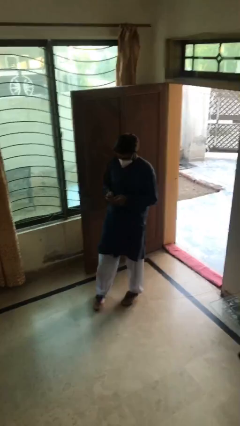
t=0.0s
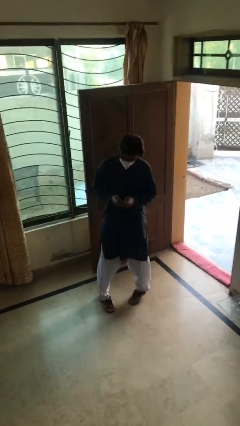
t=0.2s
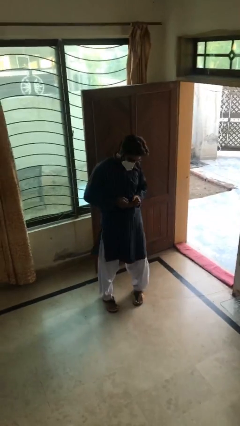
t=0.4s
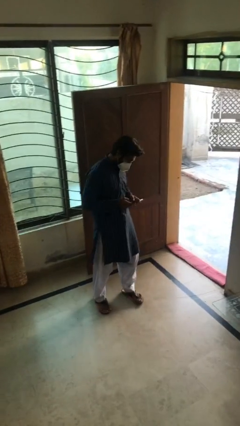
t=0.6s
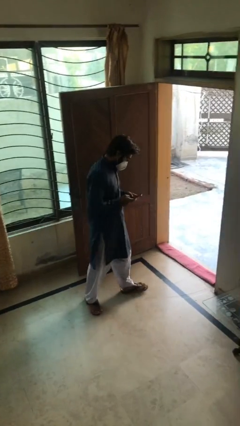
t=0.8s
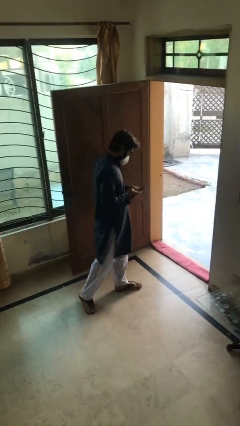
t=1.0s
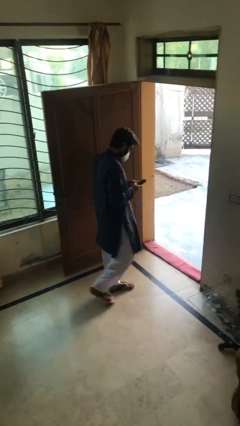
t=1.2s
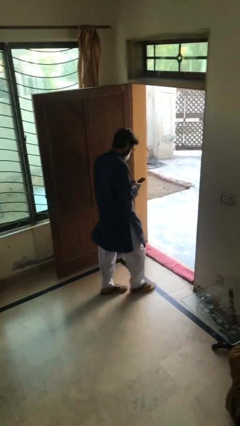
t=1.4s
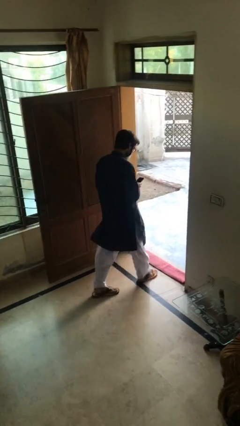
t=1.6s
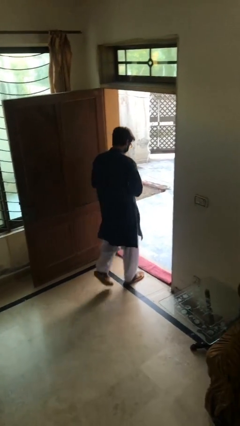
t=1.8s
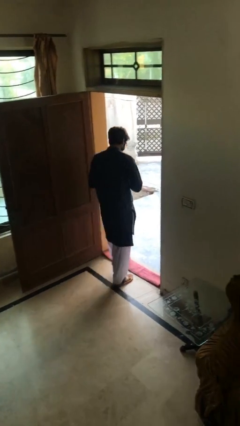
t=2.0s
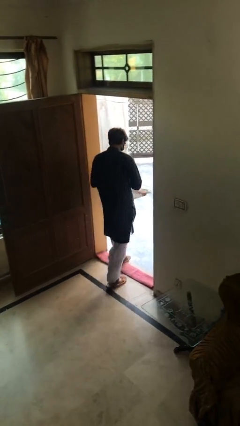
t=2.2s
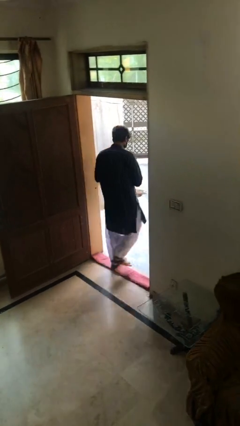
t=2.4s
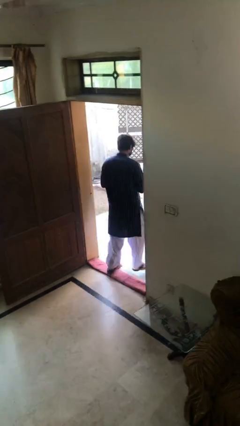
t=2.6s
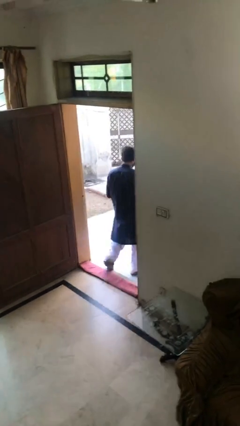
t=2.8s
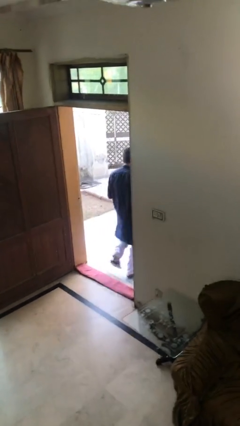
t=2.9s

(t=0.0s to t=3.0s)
person exits scene through structure

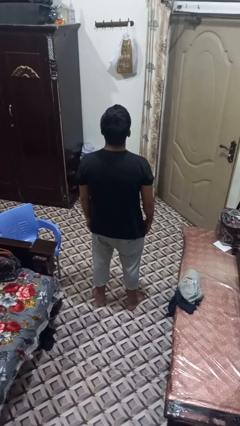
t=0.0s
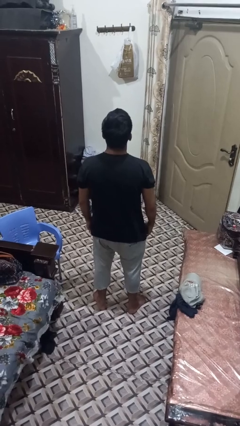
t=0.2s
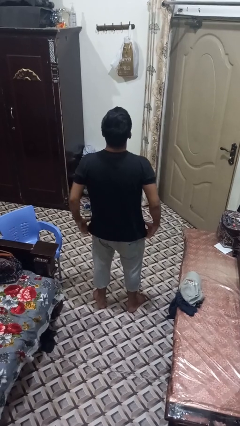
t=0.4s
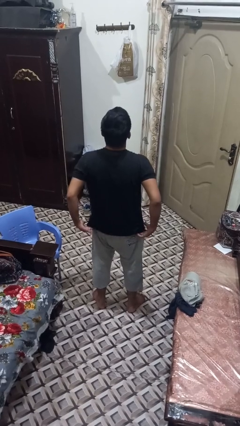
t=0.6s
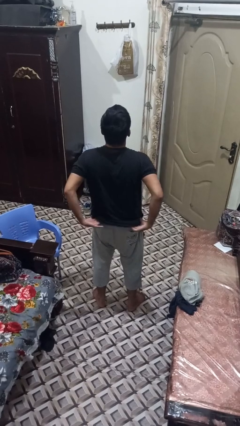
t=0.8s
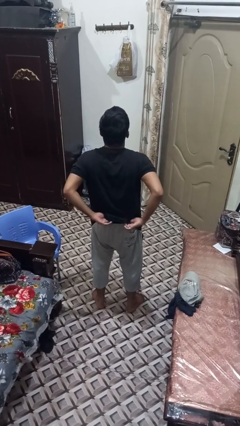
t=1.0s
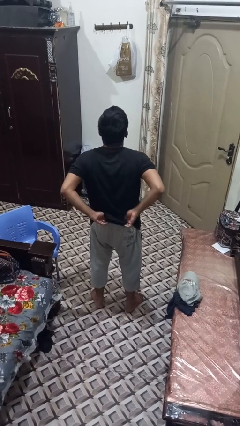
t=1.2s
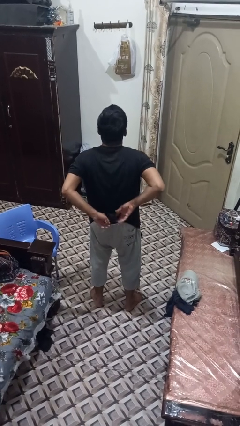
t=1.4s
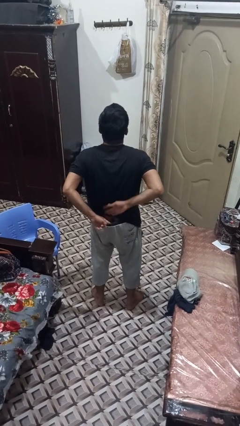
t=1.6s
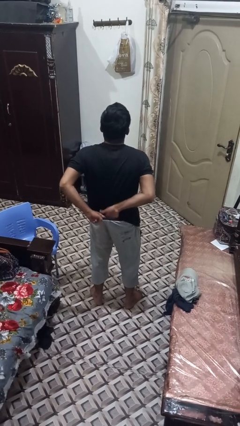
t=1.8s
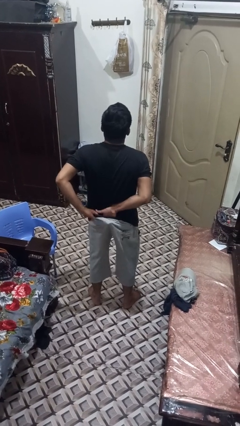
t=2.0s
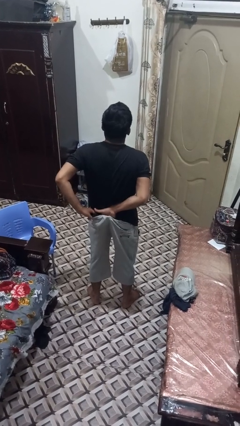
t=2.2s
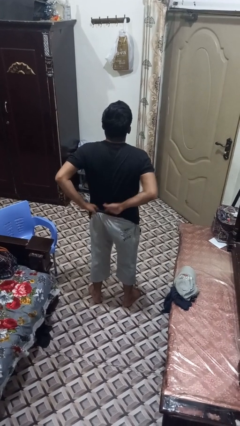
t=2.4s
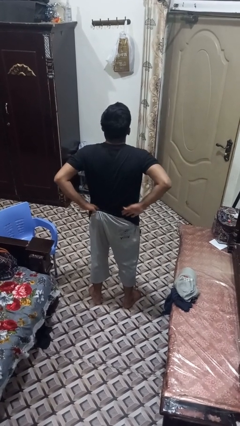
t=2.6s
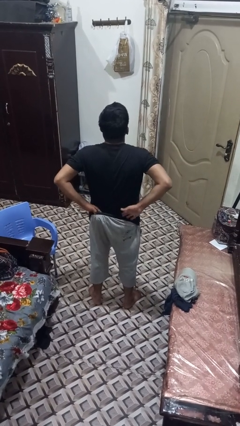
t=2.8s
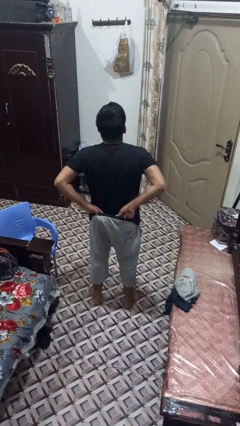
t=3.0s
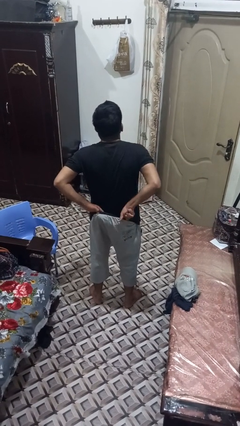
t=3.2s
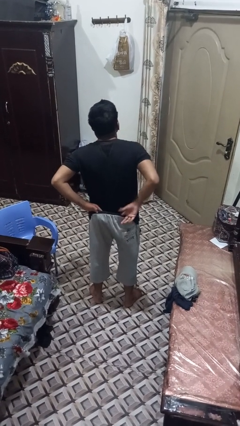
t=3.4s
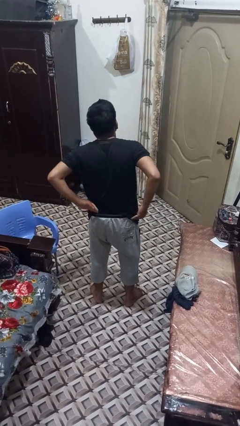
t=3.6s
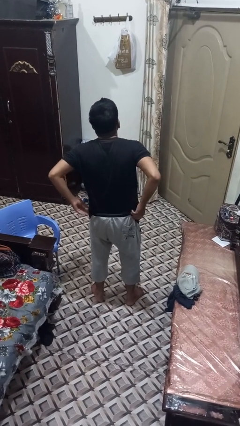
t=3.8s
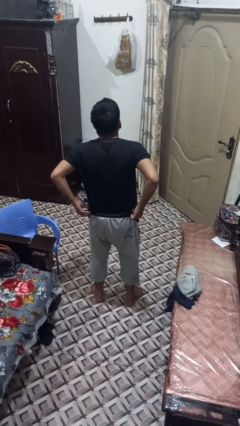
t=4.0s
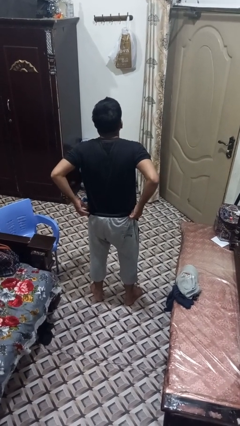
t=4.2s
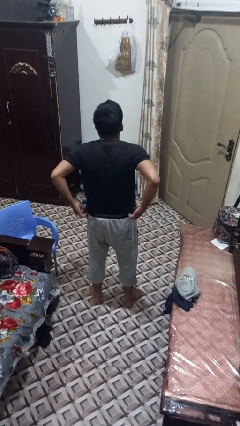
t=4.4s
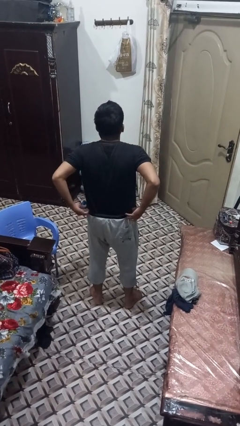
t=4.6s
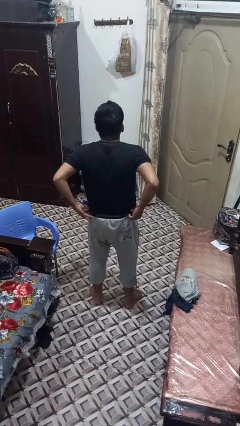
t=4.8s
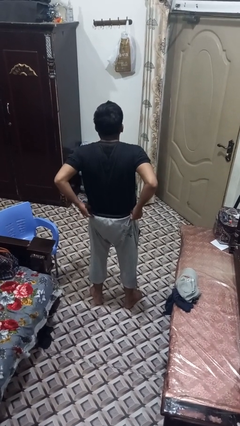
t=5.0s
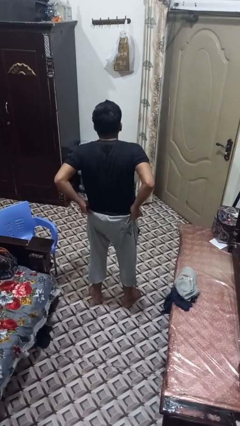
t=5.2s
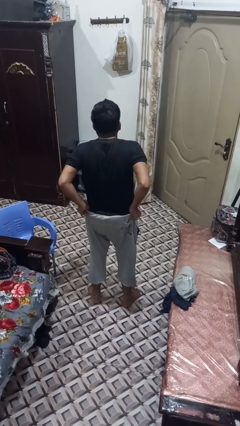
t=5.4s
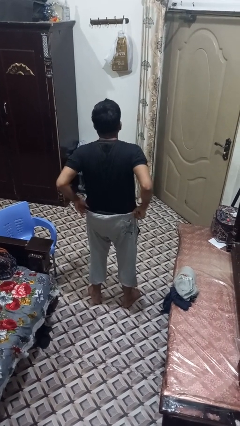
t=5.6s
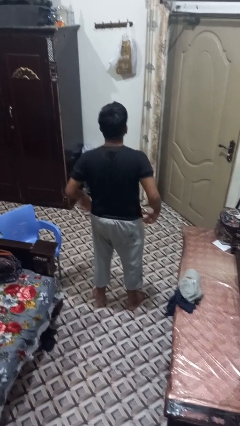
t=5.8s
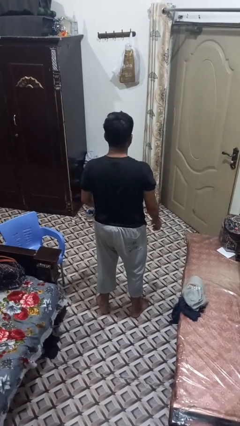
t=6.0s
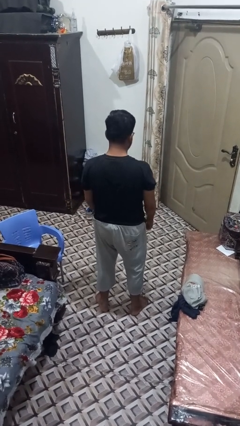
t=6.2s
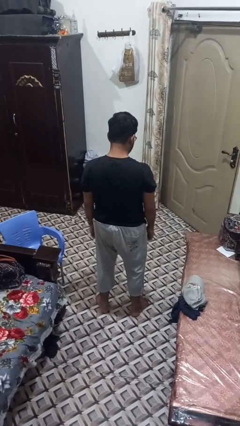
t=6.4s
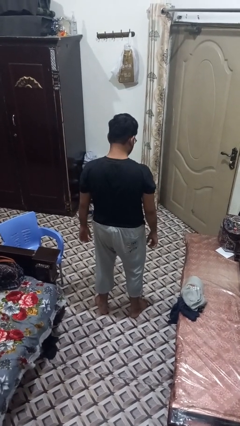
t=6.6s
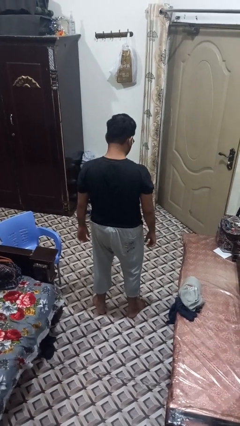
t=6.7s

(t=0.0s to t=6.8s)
person tucks in shirt

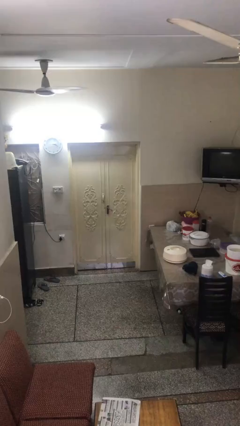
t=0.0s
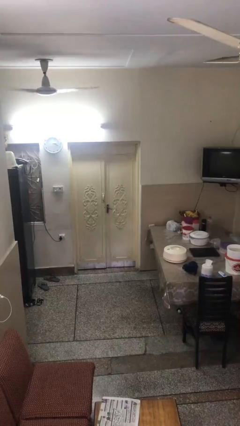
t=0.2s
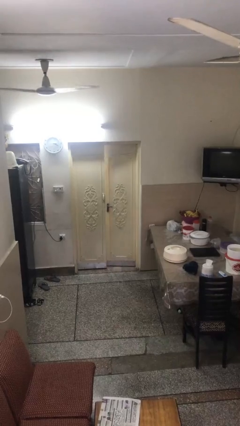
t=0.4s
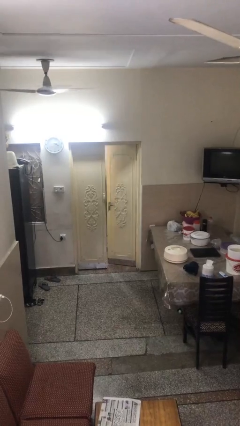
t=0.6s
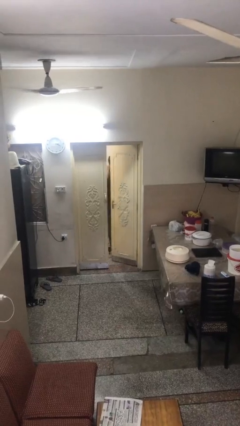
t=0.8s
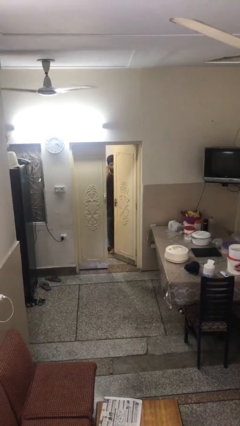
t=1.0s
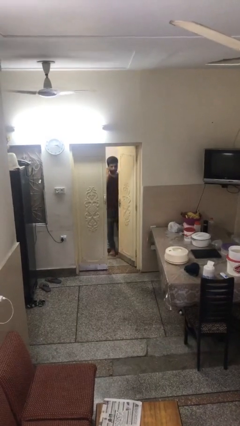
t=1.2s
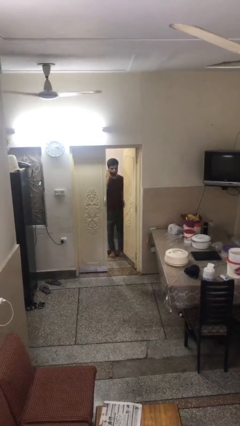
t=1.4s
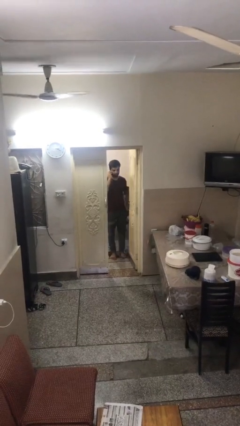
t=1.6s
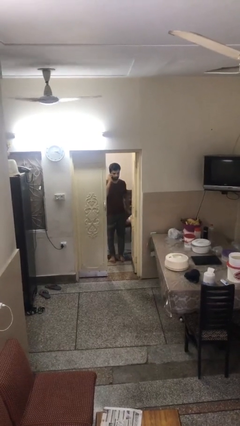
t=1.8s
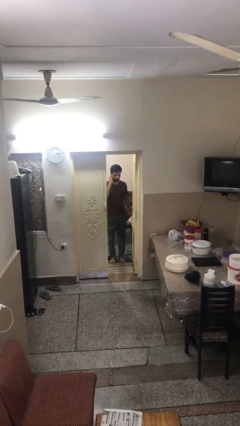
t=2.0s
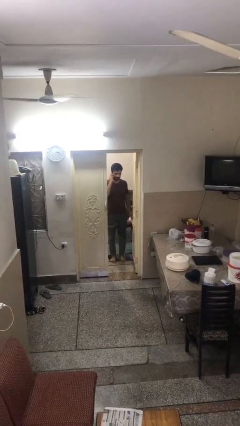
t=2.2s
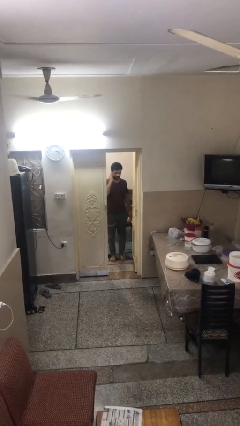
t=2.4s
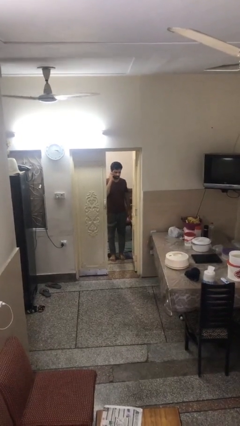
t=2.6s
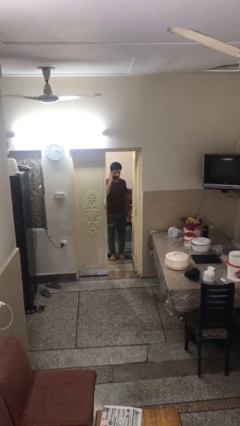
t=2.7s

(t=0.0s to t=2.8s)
person opens facility door

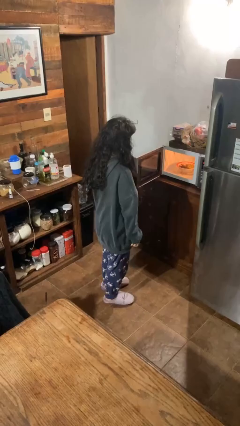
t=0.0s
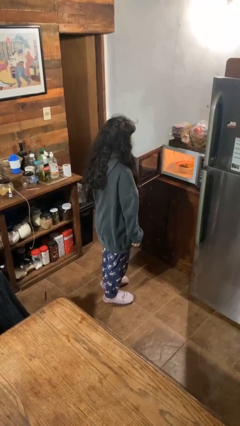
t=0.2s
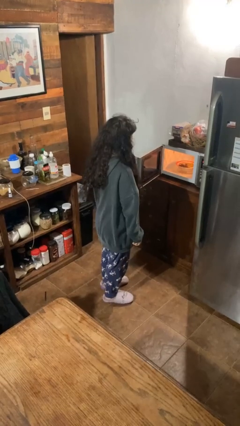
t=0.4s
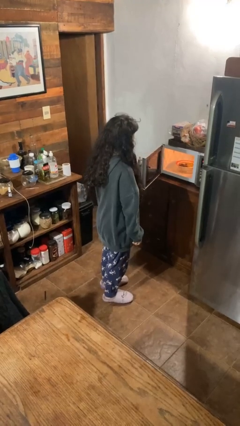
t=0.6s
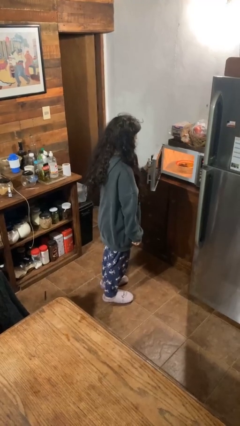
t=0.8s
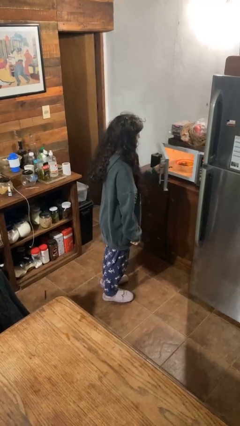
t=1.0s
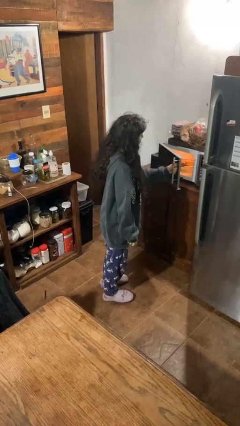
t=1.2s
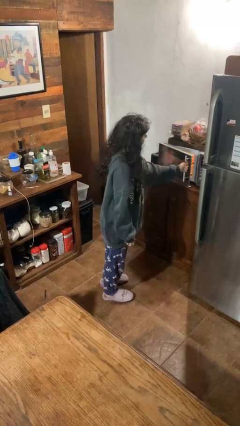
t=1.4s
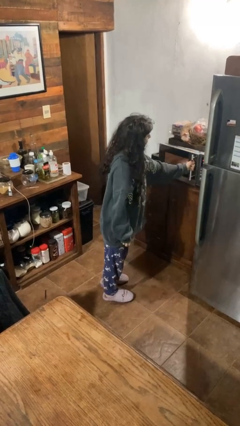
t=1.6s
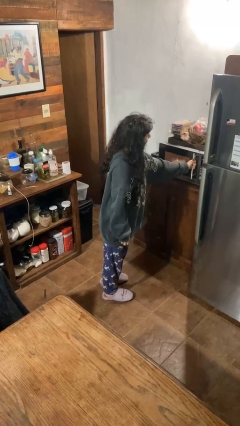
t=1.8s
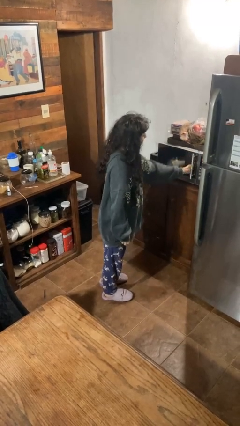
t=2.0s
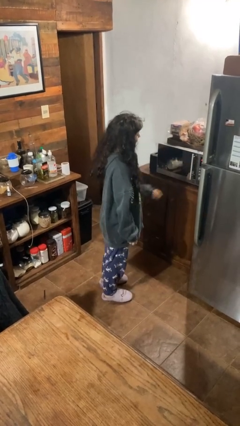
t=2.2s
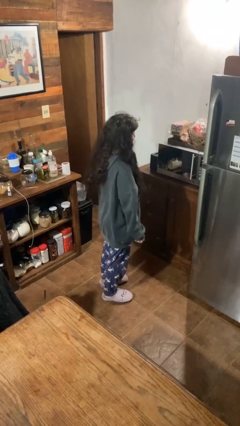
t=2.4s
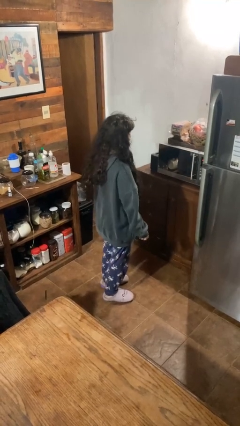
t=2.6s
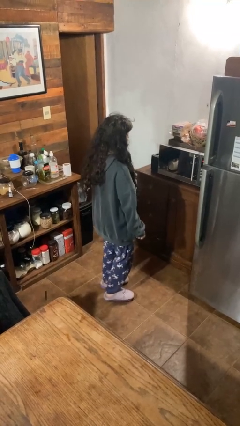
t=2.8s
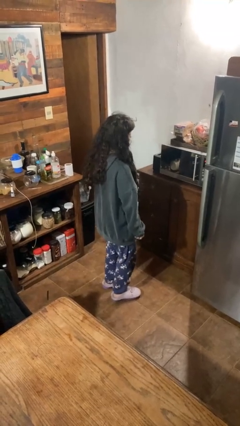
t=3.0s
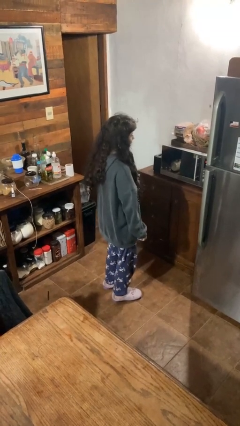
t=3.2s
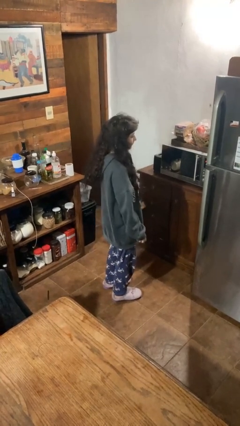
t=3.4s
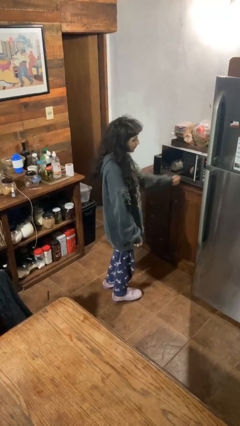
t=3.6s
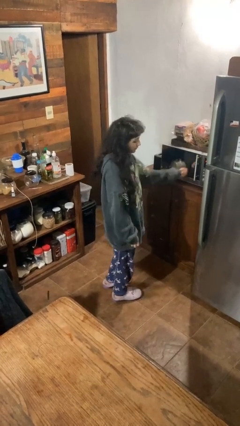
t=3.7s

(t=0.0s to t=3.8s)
person closes microwave

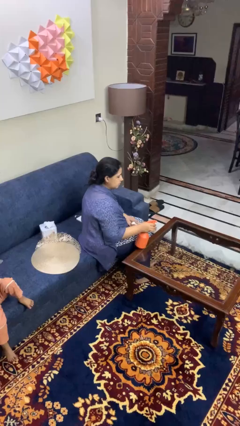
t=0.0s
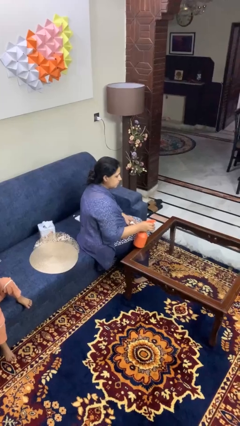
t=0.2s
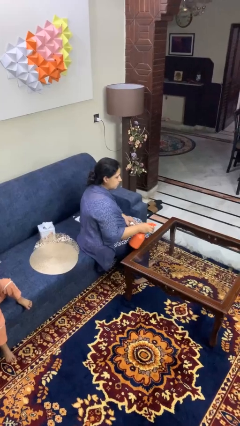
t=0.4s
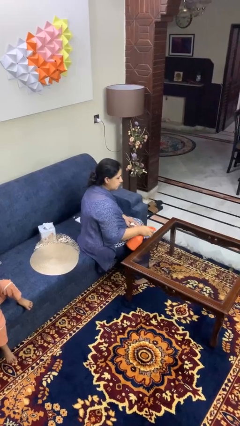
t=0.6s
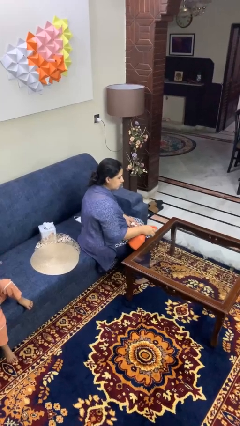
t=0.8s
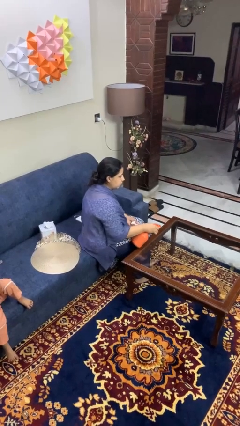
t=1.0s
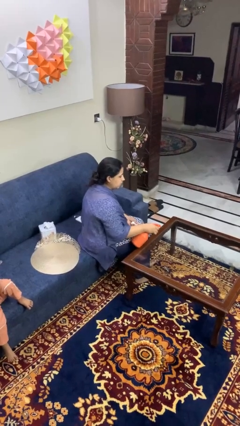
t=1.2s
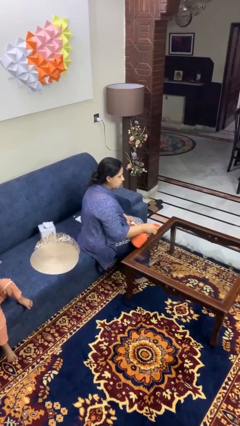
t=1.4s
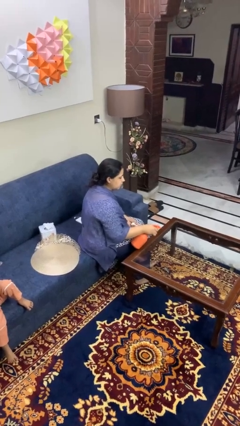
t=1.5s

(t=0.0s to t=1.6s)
person sprays from bottle
